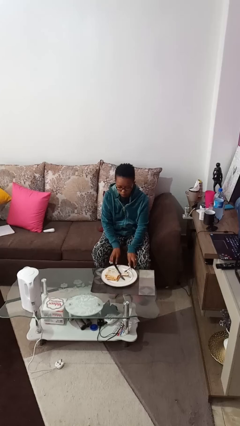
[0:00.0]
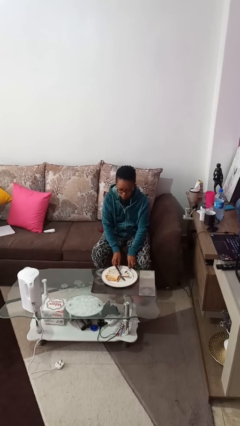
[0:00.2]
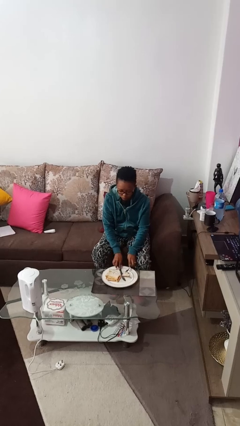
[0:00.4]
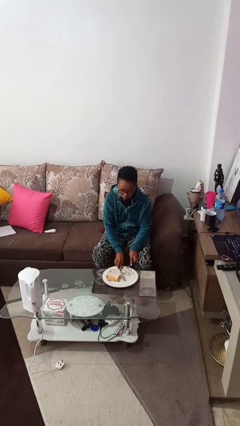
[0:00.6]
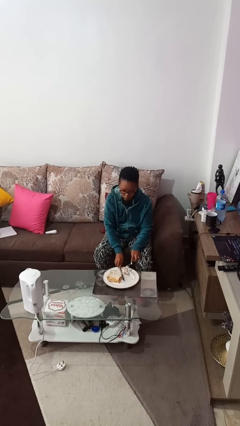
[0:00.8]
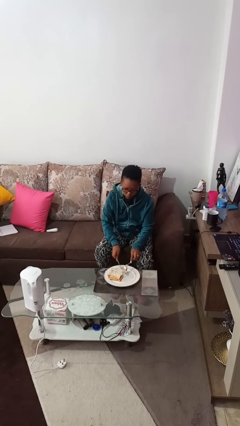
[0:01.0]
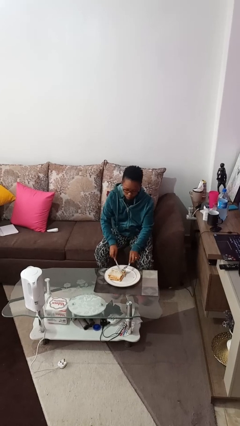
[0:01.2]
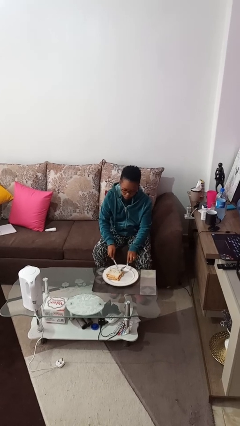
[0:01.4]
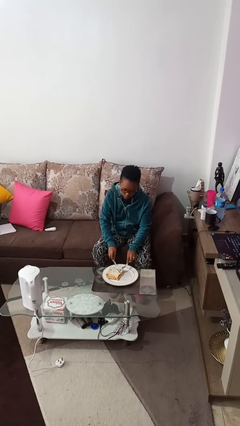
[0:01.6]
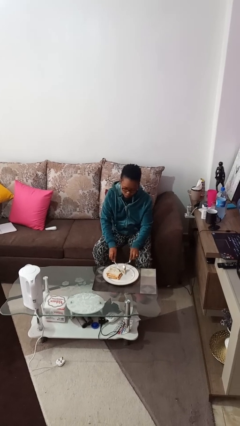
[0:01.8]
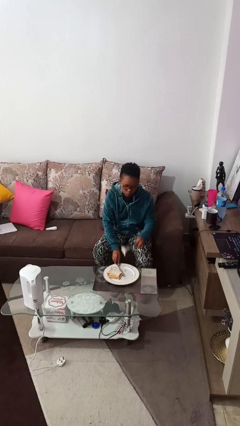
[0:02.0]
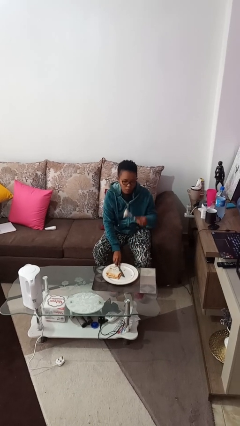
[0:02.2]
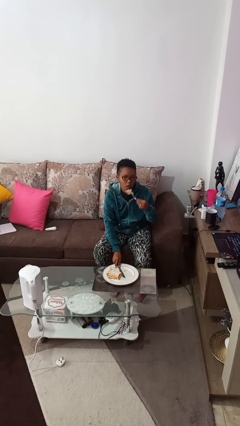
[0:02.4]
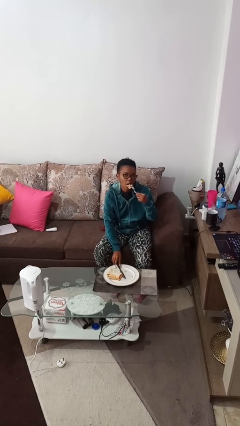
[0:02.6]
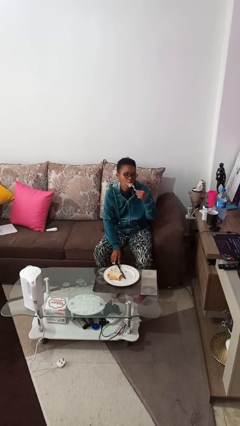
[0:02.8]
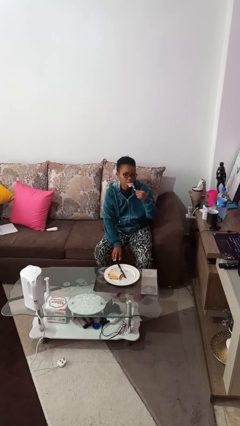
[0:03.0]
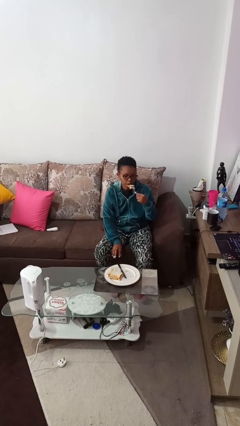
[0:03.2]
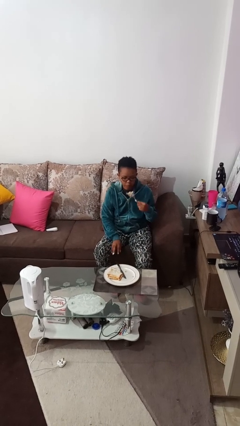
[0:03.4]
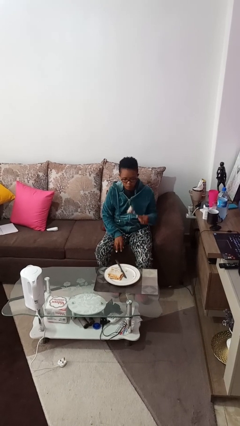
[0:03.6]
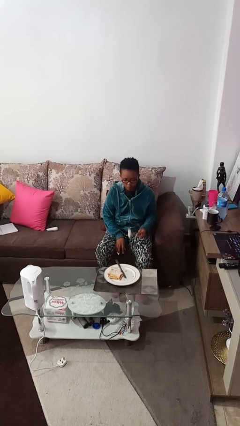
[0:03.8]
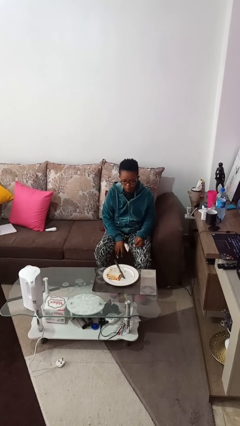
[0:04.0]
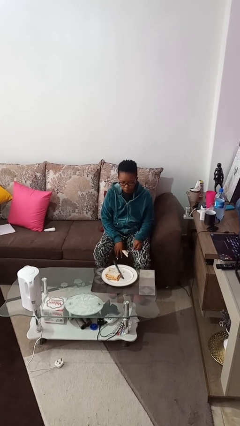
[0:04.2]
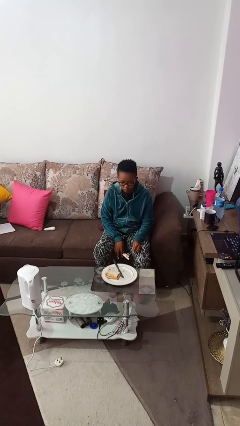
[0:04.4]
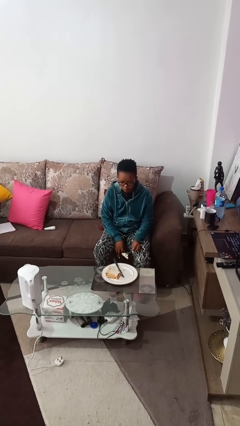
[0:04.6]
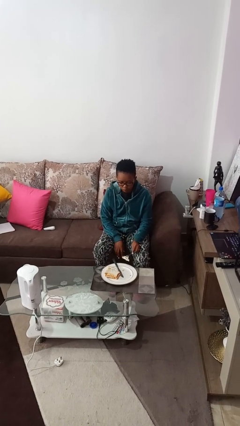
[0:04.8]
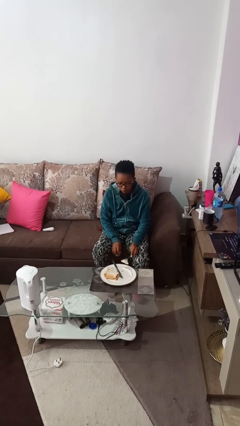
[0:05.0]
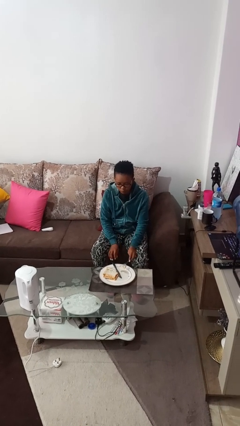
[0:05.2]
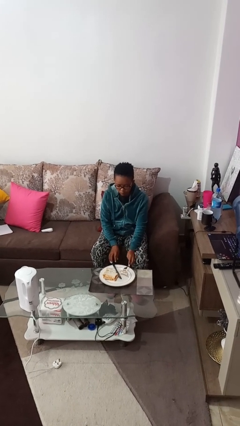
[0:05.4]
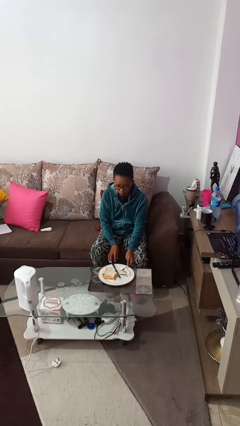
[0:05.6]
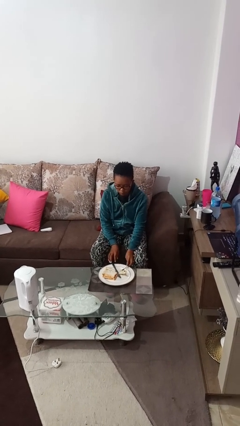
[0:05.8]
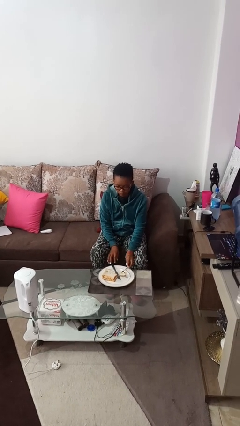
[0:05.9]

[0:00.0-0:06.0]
person eats with utensil

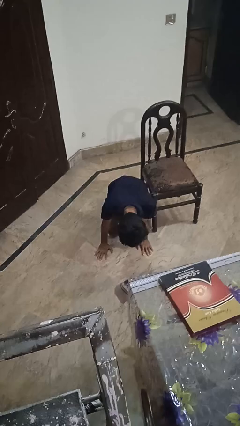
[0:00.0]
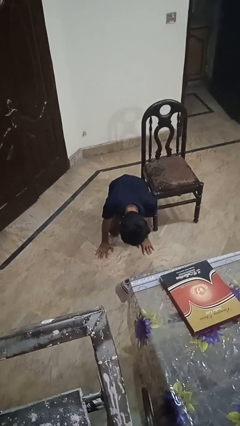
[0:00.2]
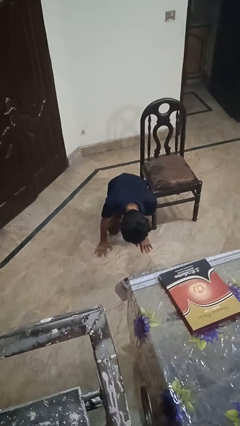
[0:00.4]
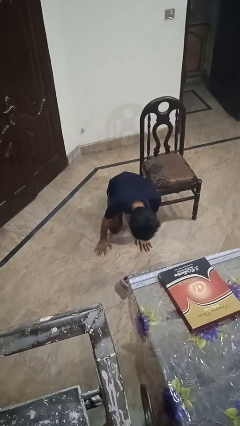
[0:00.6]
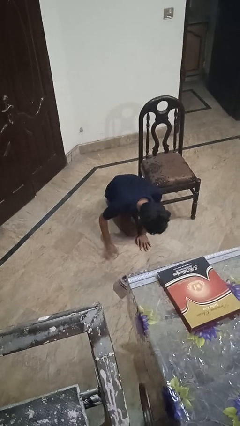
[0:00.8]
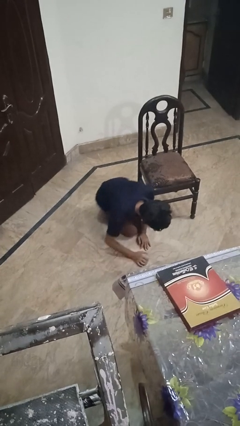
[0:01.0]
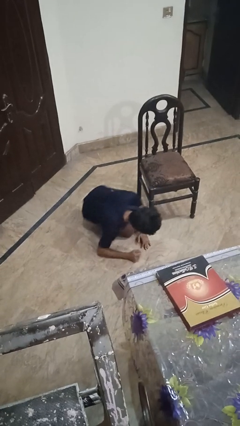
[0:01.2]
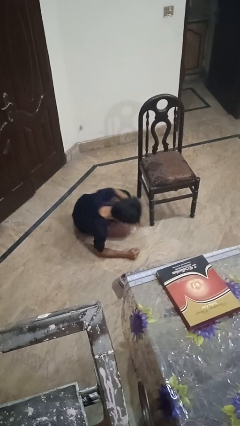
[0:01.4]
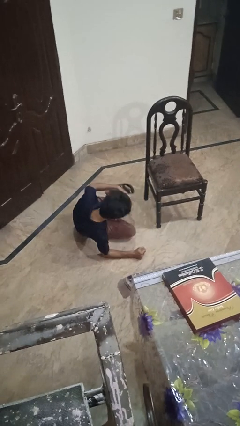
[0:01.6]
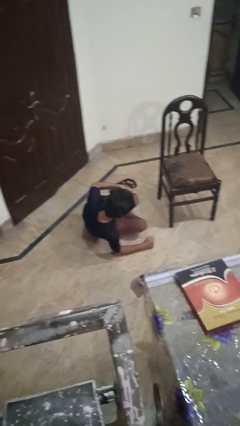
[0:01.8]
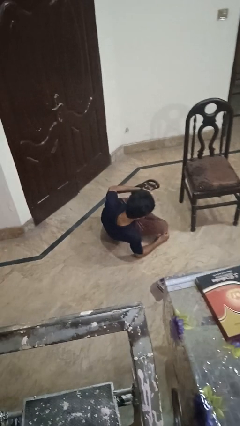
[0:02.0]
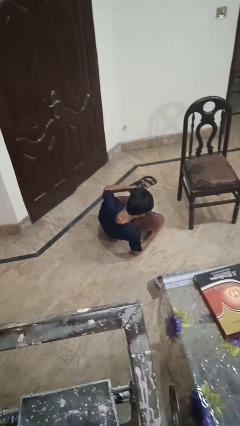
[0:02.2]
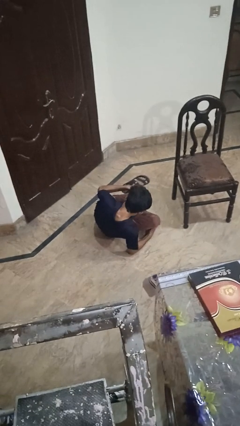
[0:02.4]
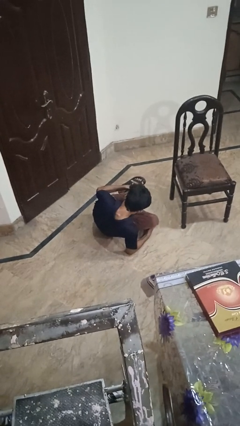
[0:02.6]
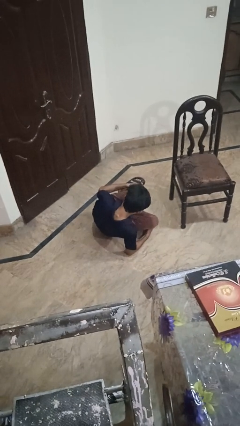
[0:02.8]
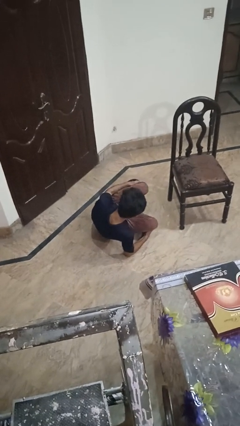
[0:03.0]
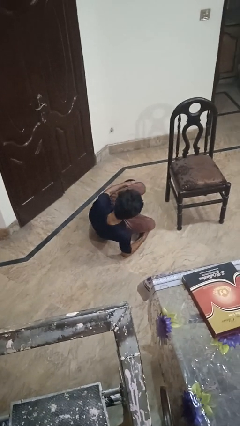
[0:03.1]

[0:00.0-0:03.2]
person lies down on floor

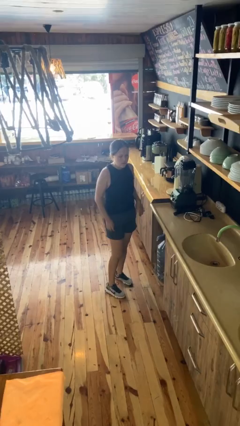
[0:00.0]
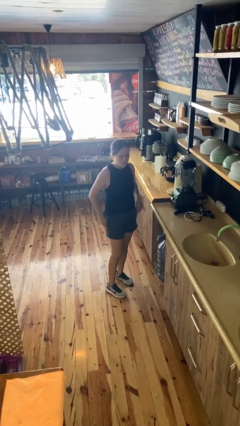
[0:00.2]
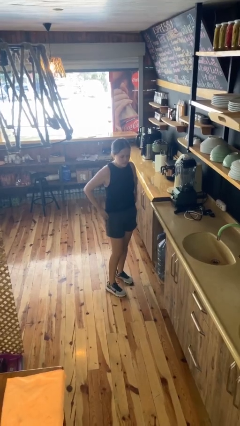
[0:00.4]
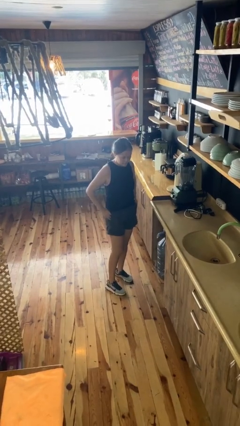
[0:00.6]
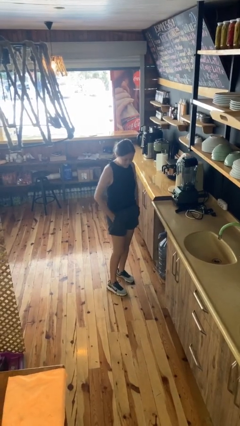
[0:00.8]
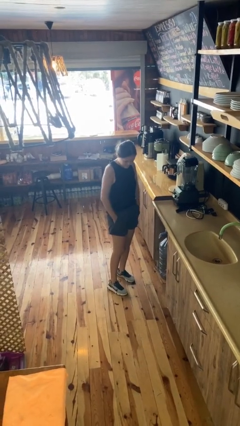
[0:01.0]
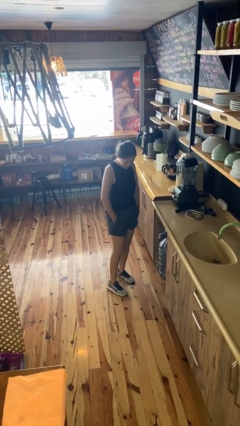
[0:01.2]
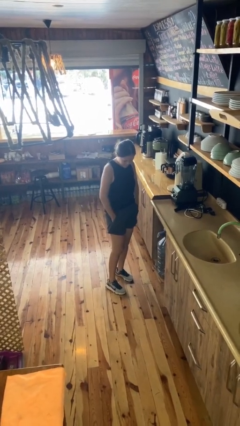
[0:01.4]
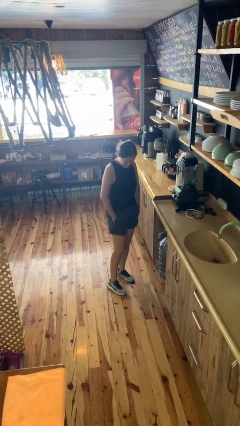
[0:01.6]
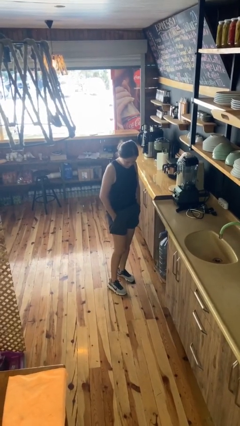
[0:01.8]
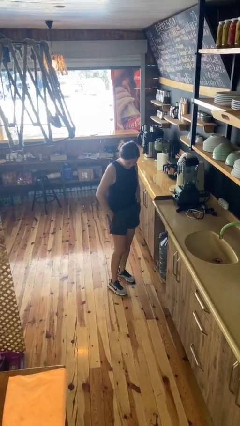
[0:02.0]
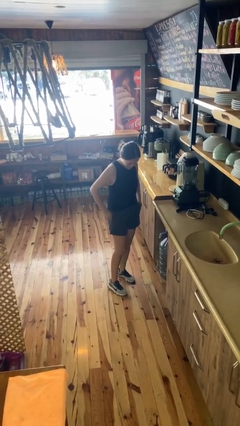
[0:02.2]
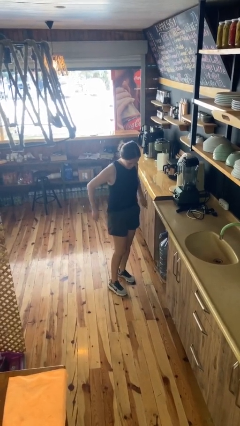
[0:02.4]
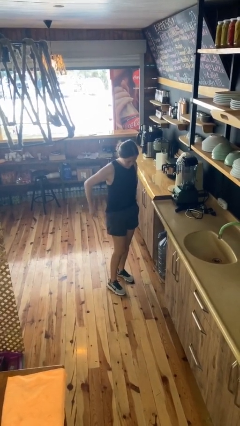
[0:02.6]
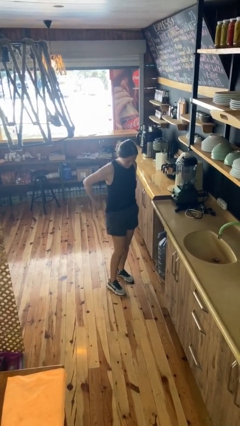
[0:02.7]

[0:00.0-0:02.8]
person puts hands in back pockets

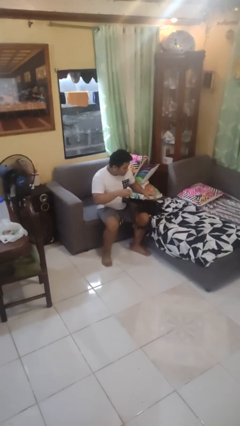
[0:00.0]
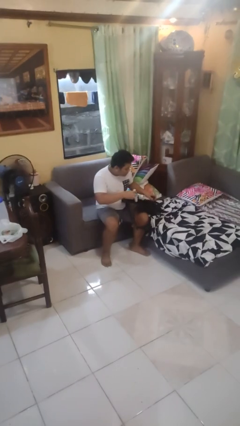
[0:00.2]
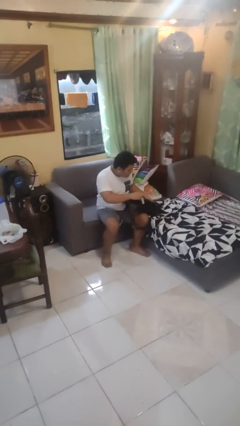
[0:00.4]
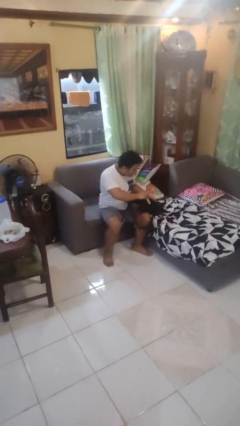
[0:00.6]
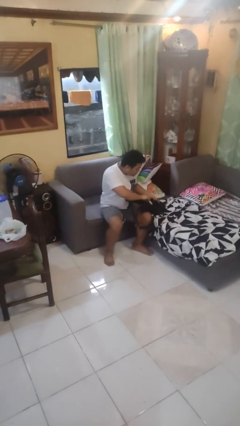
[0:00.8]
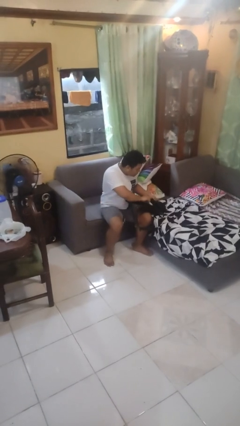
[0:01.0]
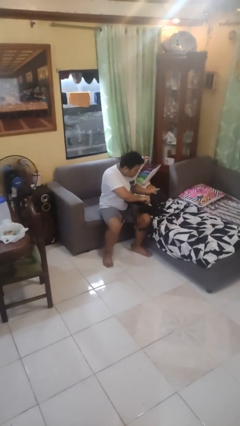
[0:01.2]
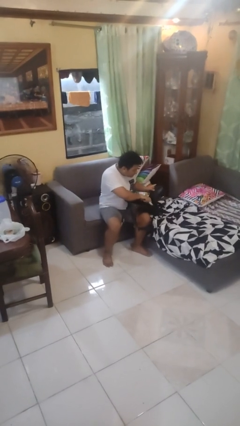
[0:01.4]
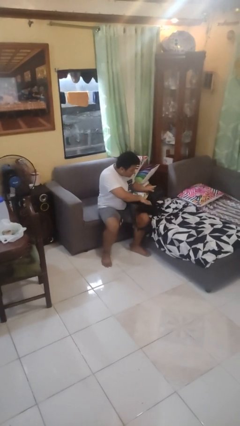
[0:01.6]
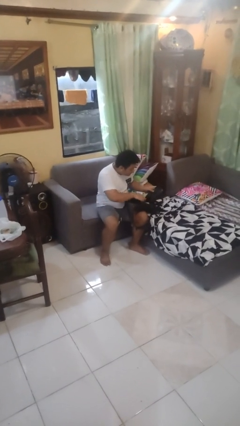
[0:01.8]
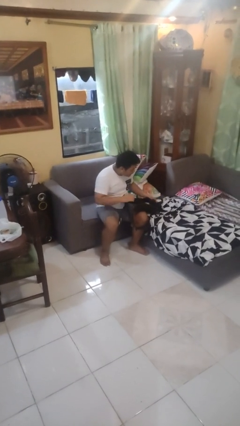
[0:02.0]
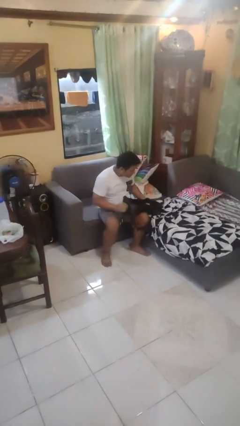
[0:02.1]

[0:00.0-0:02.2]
person puts object into backpack

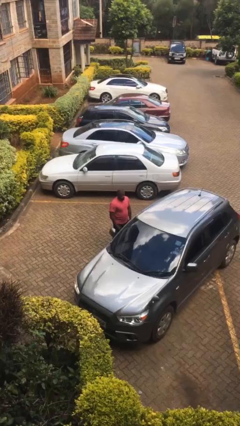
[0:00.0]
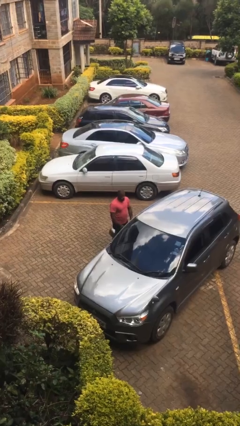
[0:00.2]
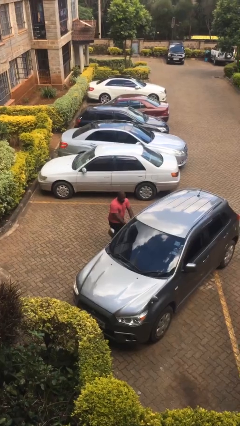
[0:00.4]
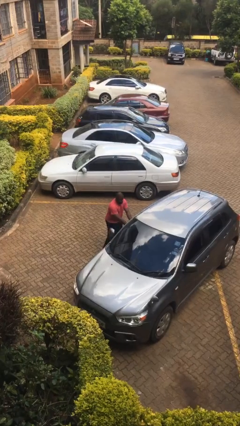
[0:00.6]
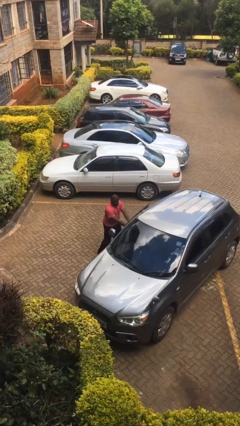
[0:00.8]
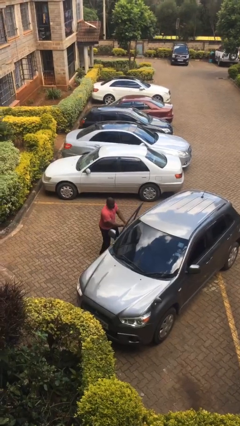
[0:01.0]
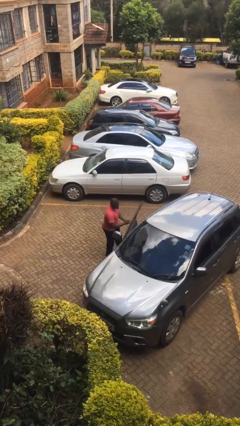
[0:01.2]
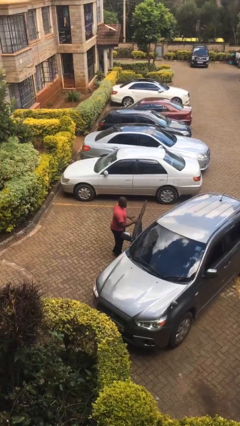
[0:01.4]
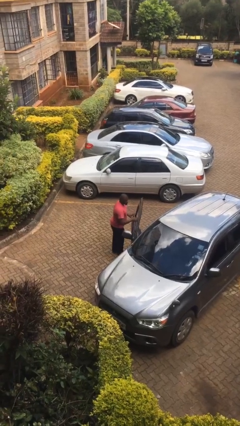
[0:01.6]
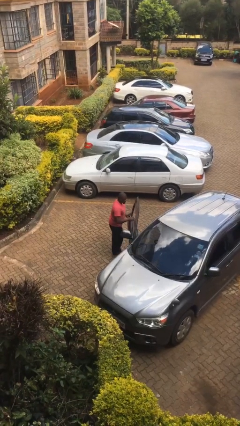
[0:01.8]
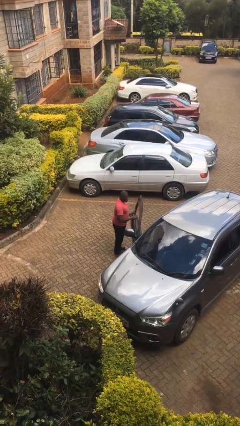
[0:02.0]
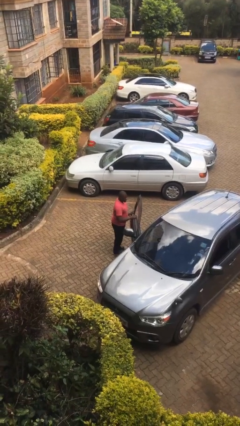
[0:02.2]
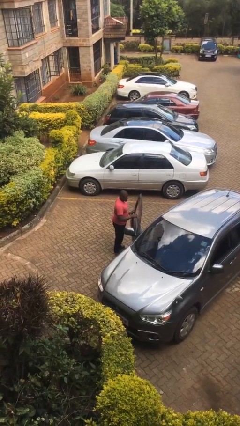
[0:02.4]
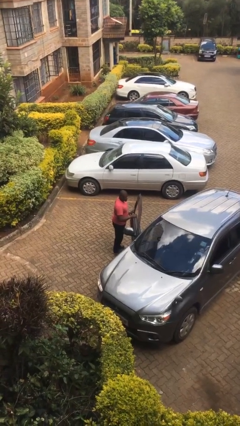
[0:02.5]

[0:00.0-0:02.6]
person opens car door

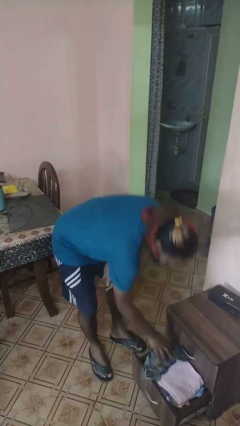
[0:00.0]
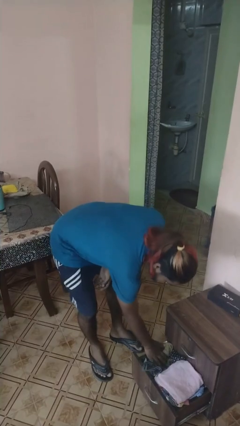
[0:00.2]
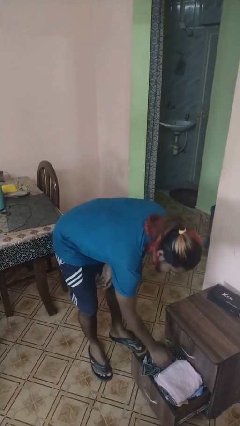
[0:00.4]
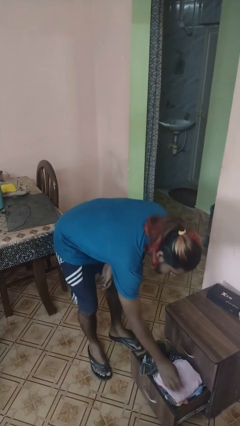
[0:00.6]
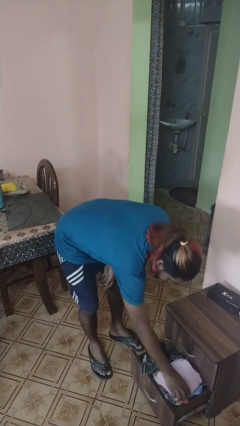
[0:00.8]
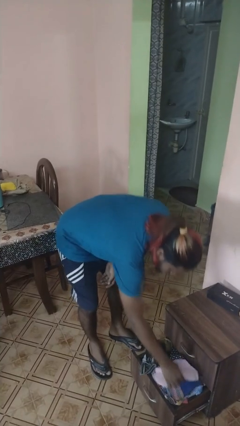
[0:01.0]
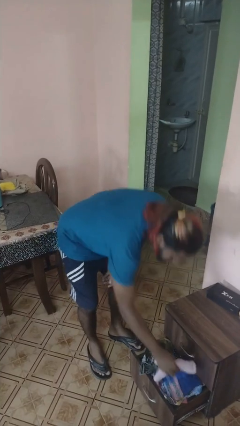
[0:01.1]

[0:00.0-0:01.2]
person puts clothes into dresser
